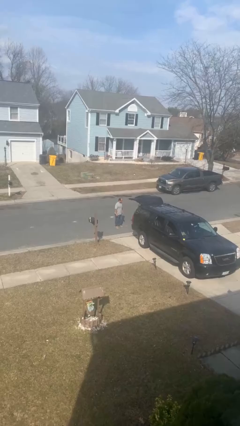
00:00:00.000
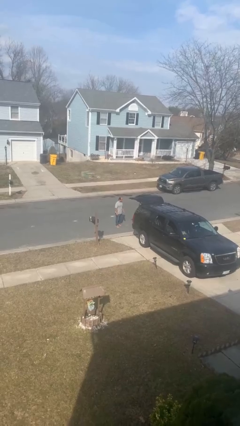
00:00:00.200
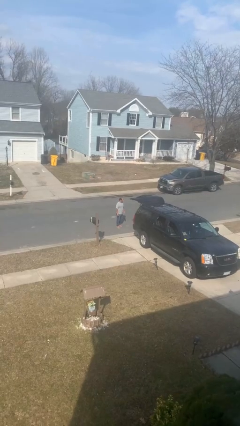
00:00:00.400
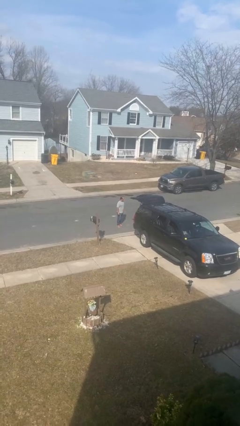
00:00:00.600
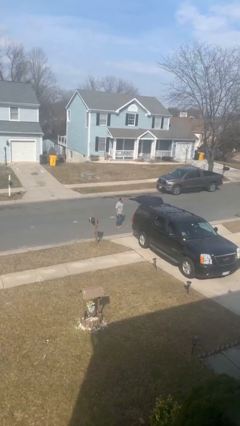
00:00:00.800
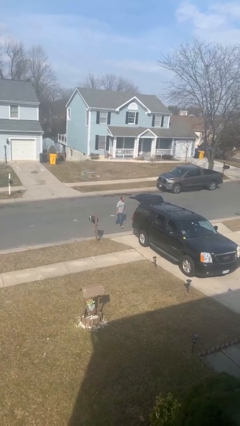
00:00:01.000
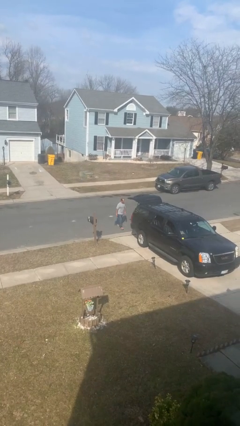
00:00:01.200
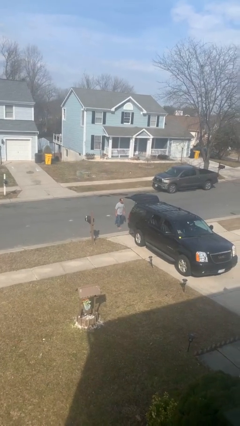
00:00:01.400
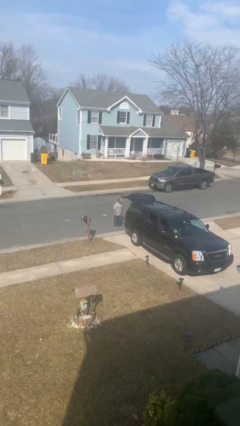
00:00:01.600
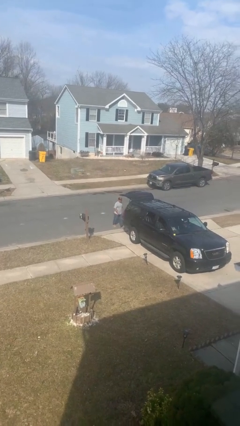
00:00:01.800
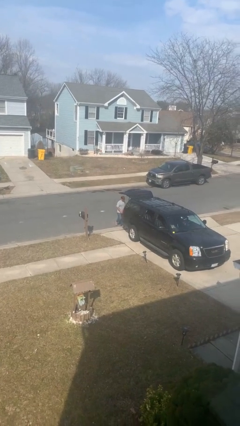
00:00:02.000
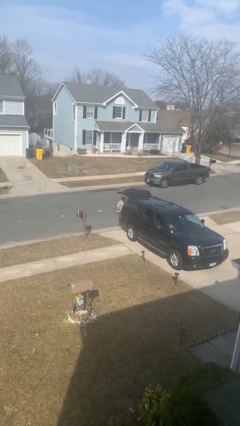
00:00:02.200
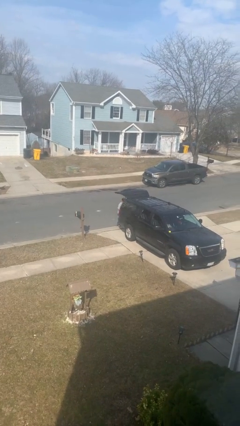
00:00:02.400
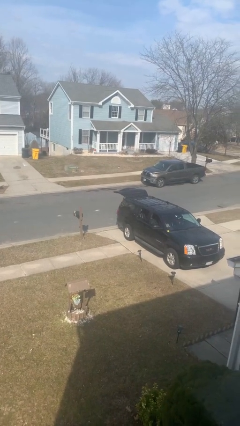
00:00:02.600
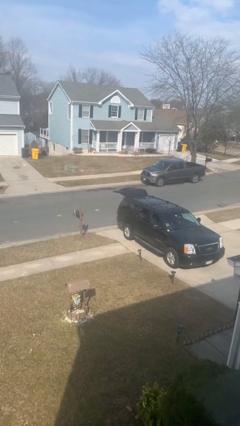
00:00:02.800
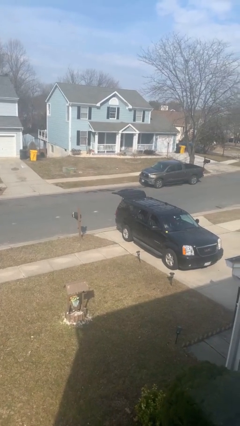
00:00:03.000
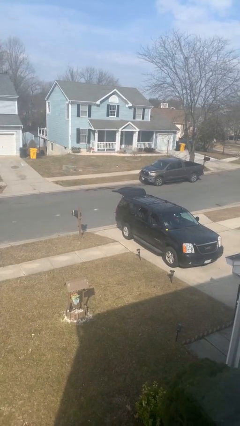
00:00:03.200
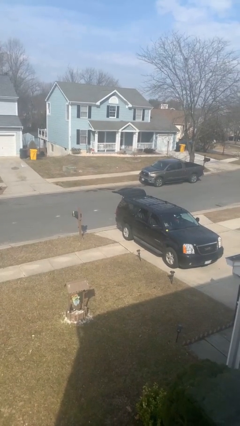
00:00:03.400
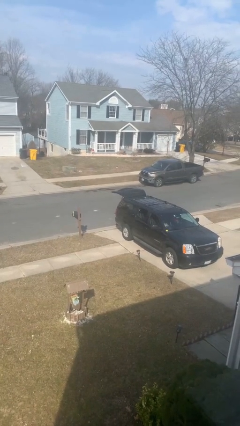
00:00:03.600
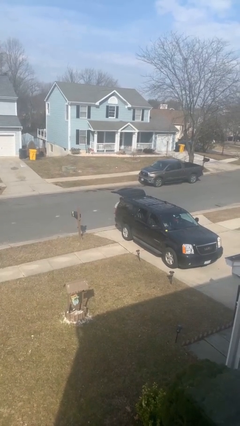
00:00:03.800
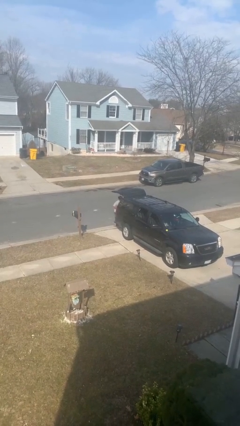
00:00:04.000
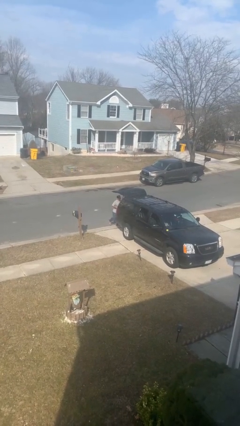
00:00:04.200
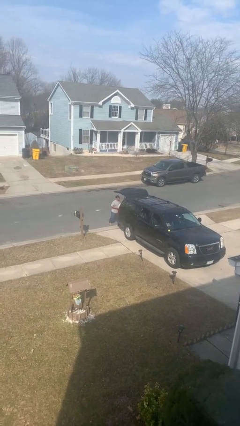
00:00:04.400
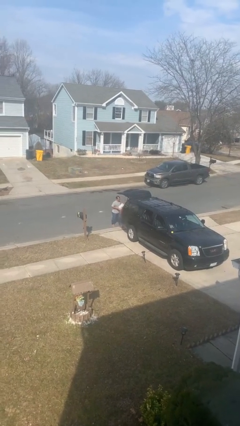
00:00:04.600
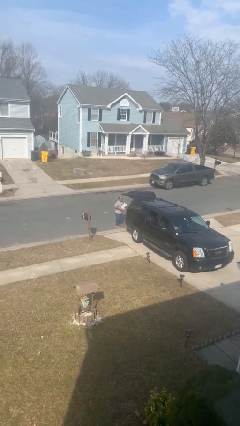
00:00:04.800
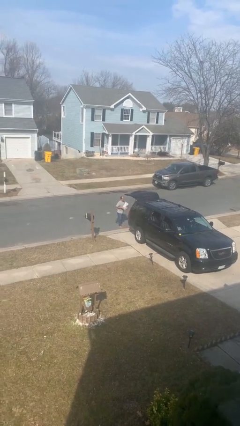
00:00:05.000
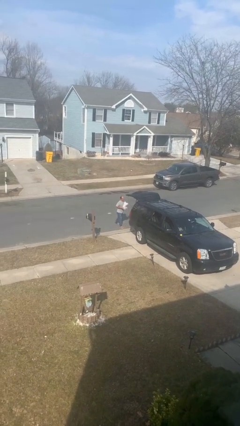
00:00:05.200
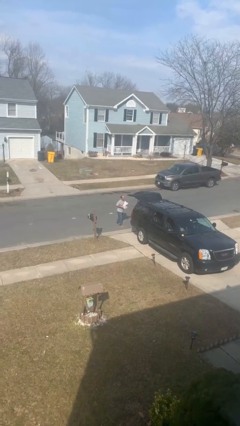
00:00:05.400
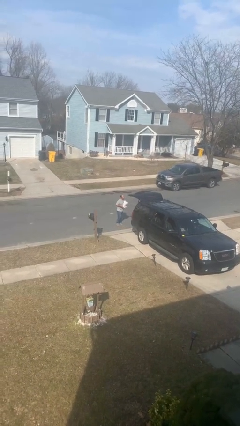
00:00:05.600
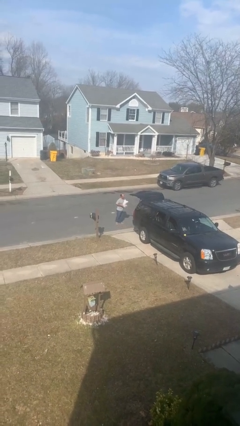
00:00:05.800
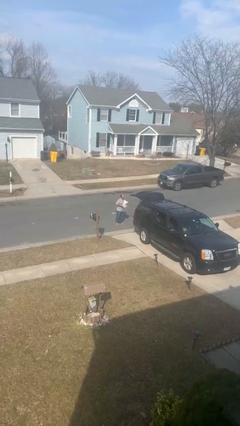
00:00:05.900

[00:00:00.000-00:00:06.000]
person unloads car

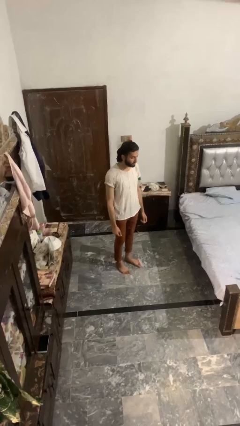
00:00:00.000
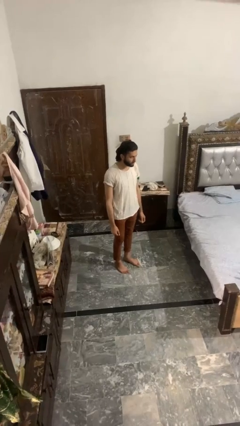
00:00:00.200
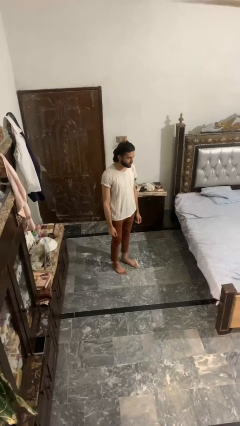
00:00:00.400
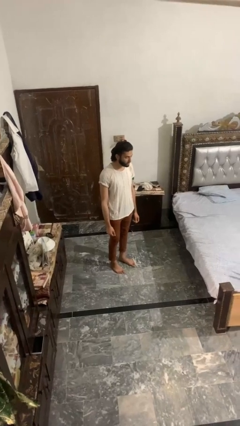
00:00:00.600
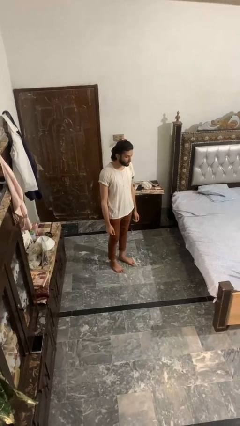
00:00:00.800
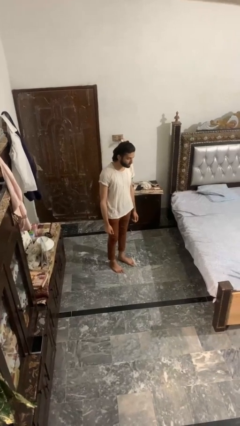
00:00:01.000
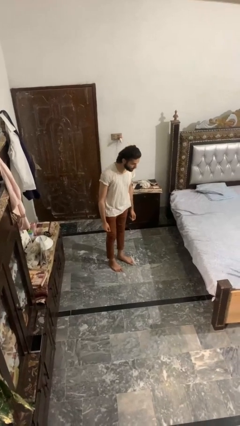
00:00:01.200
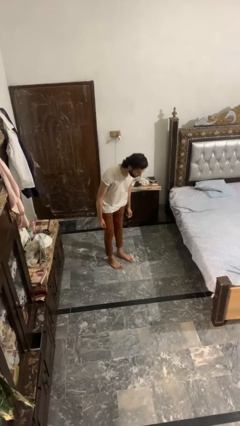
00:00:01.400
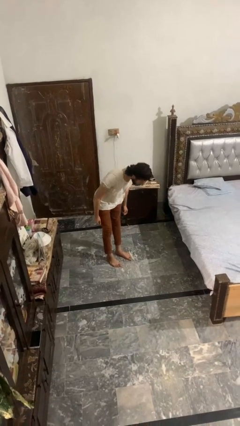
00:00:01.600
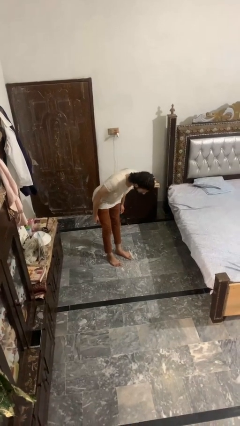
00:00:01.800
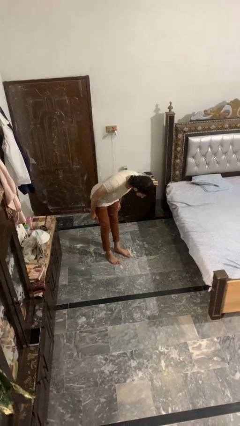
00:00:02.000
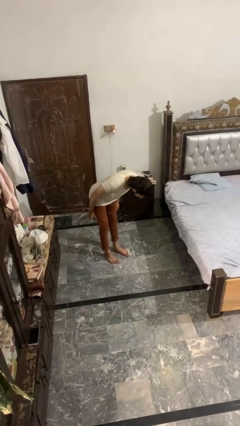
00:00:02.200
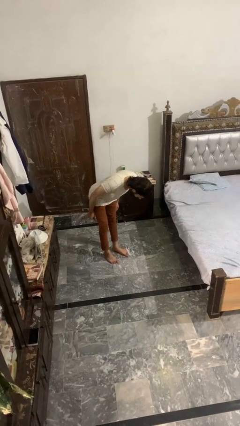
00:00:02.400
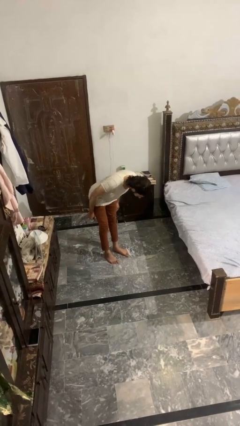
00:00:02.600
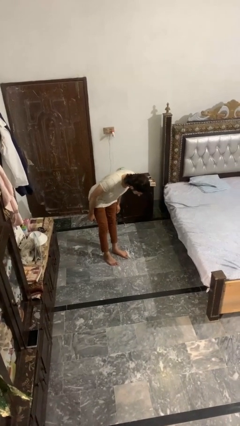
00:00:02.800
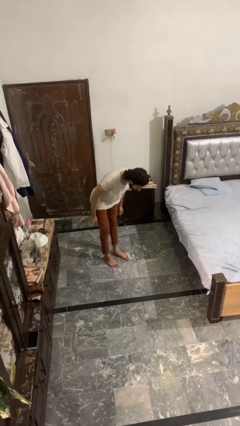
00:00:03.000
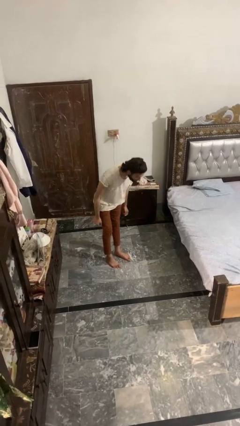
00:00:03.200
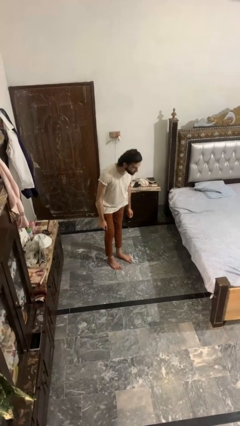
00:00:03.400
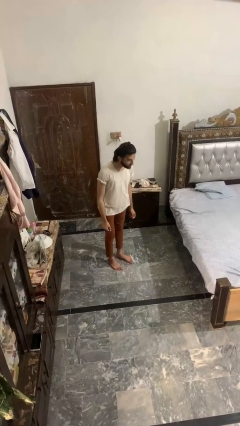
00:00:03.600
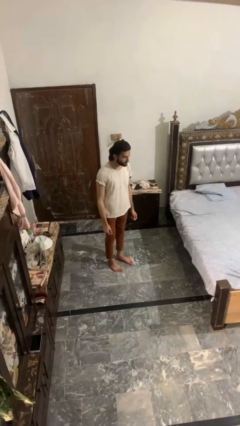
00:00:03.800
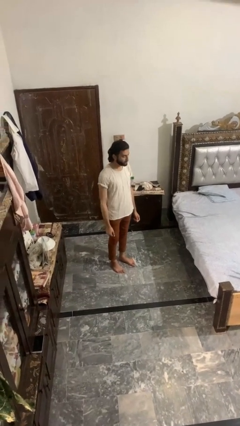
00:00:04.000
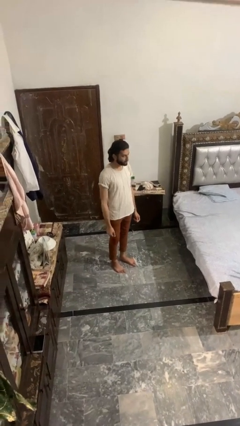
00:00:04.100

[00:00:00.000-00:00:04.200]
person bows

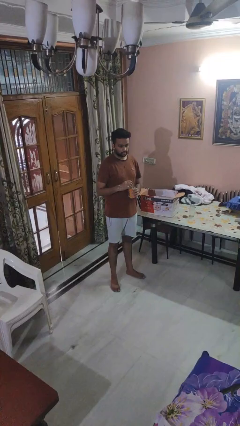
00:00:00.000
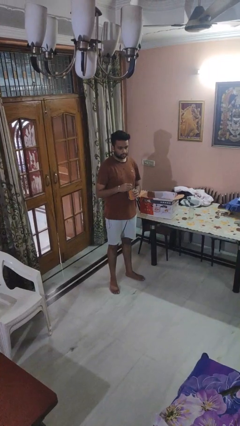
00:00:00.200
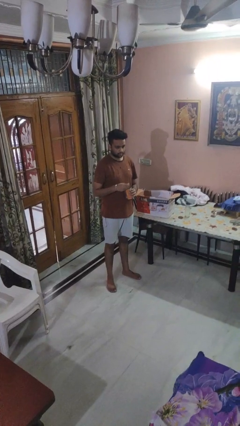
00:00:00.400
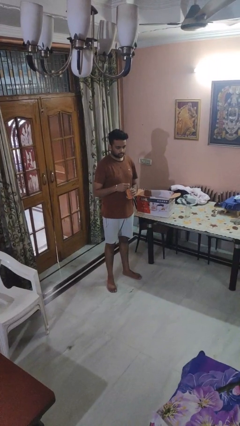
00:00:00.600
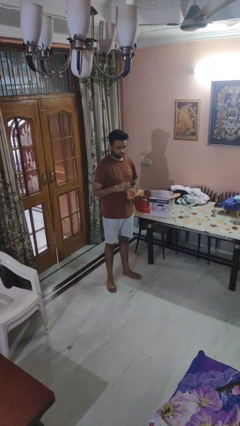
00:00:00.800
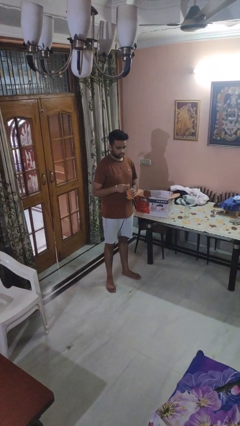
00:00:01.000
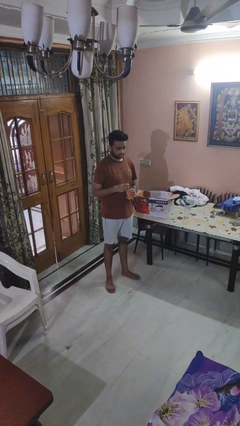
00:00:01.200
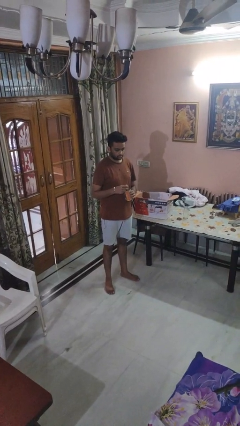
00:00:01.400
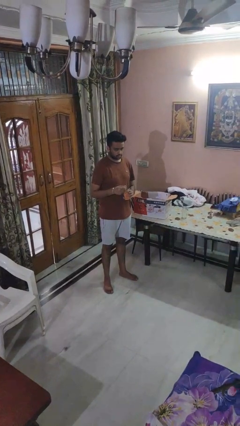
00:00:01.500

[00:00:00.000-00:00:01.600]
person opens can with can opener

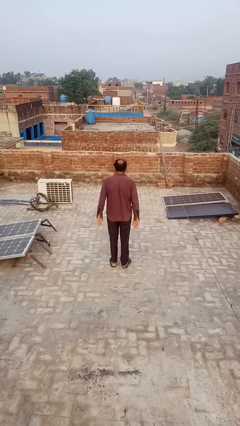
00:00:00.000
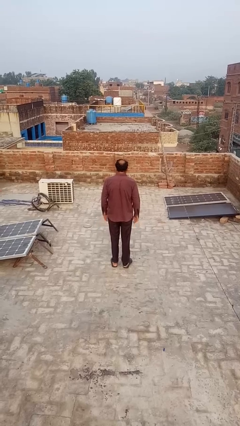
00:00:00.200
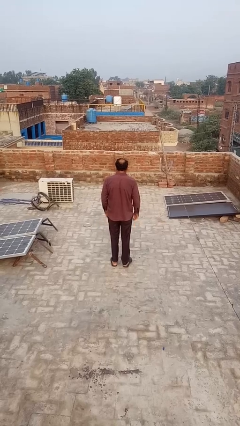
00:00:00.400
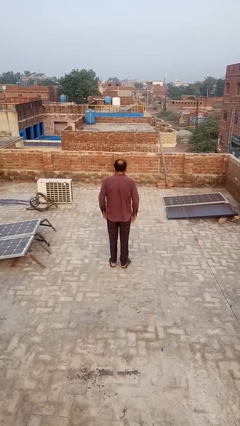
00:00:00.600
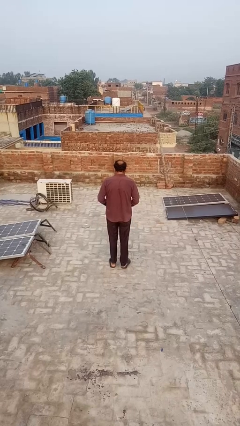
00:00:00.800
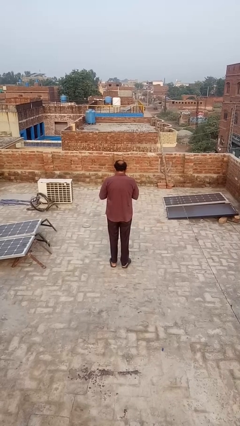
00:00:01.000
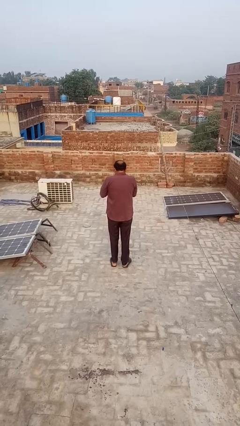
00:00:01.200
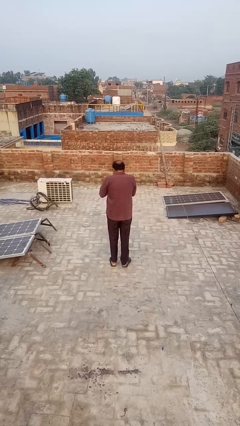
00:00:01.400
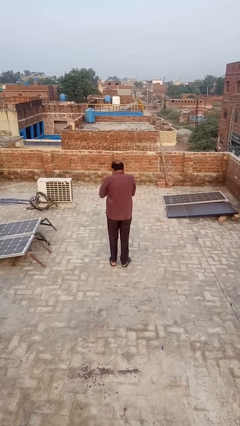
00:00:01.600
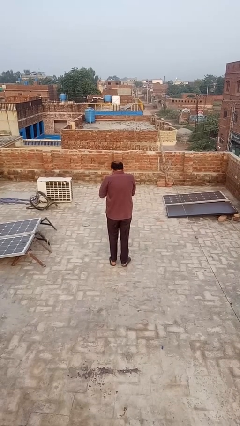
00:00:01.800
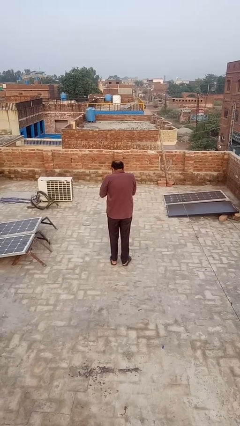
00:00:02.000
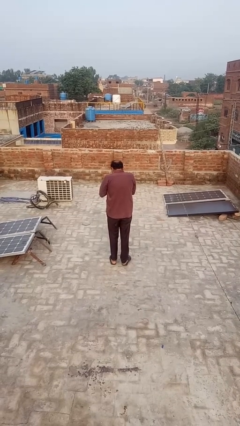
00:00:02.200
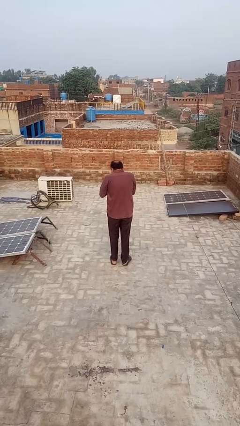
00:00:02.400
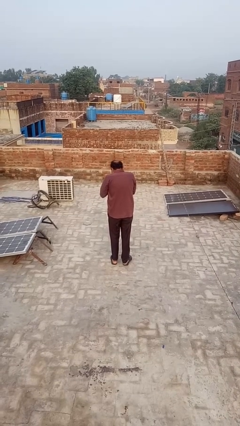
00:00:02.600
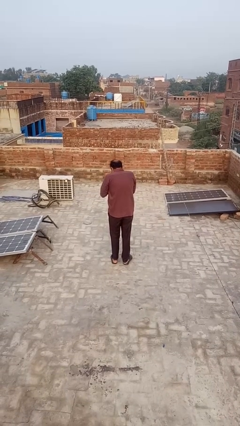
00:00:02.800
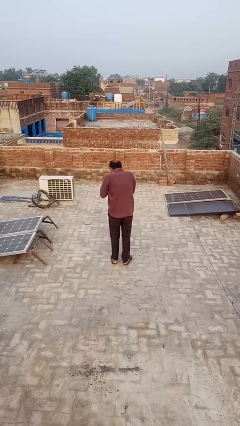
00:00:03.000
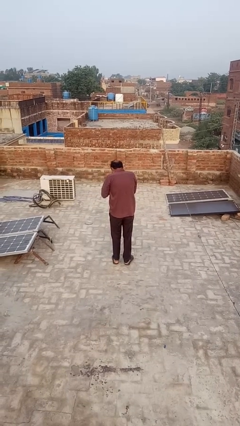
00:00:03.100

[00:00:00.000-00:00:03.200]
person blows into hands

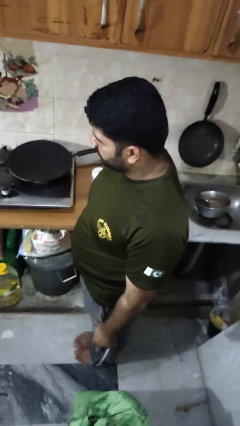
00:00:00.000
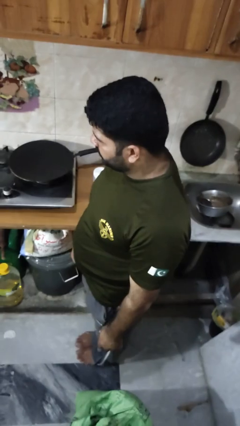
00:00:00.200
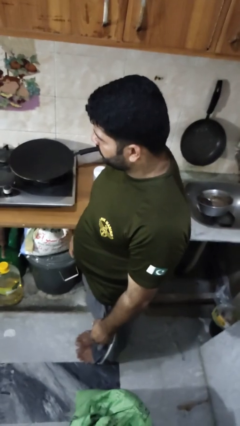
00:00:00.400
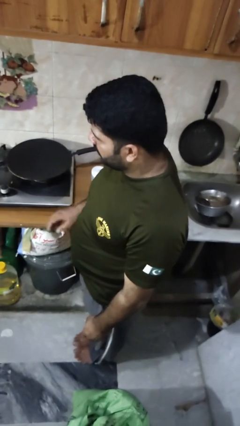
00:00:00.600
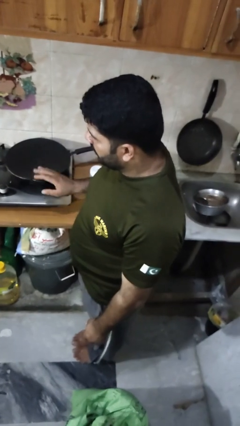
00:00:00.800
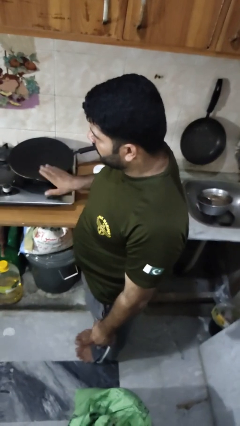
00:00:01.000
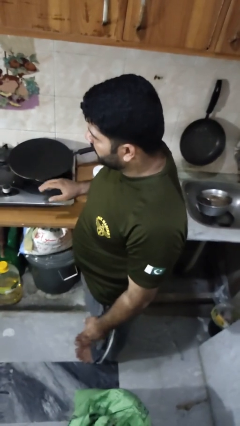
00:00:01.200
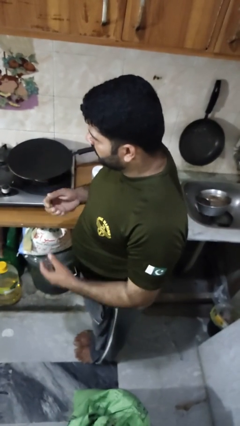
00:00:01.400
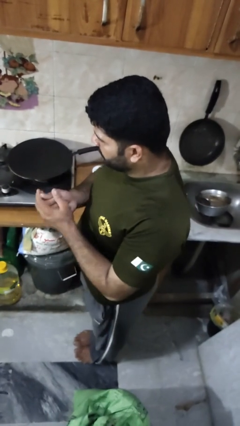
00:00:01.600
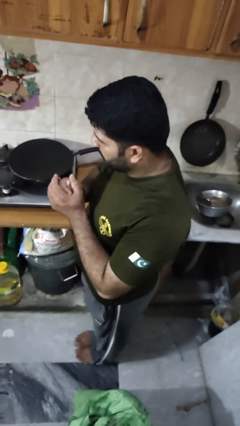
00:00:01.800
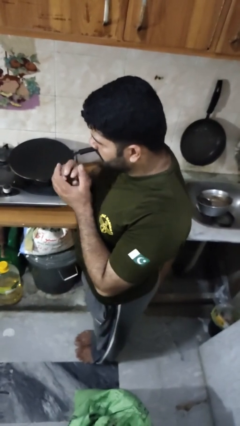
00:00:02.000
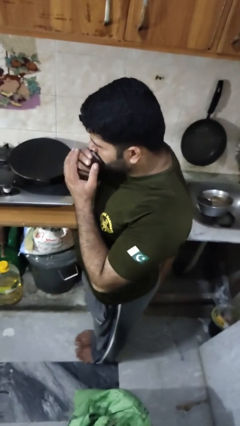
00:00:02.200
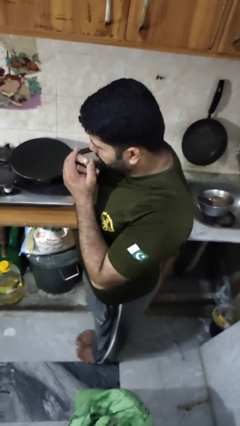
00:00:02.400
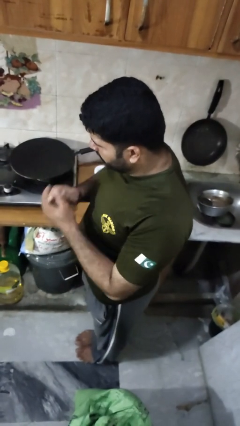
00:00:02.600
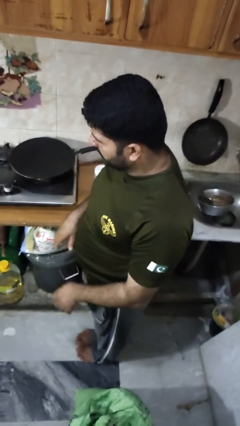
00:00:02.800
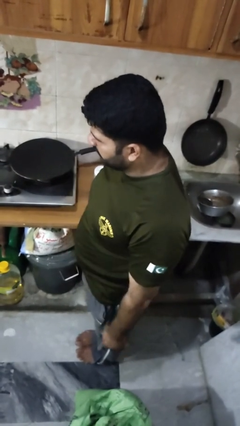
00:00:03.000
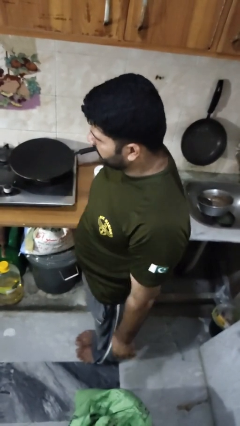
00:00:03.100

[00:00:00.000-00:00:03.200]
person burns hand
